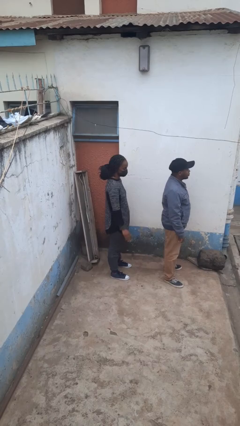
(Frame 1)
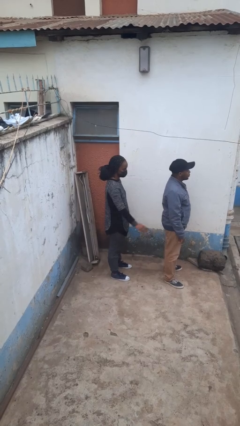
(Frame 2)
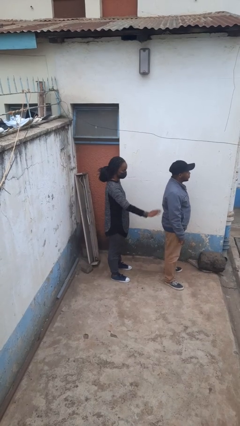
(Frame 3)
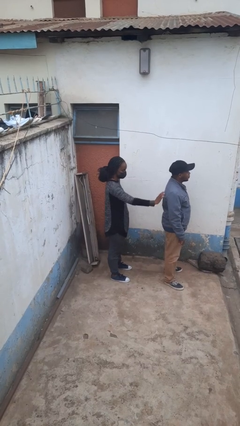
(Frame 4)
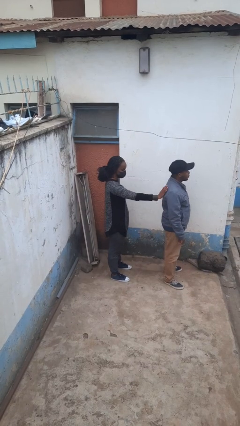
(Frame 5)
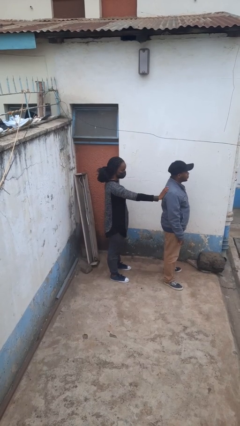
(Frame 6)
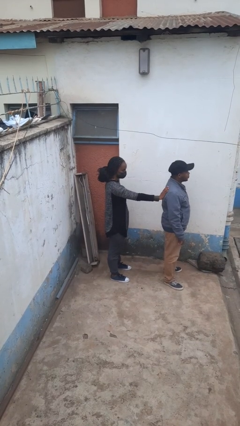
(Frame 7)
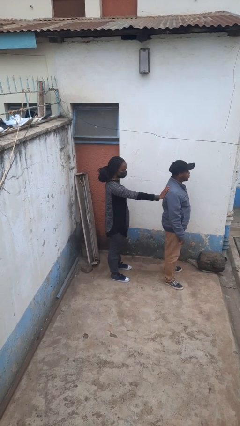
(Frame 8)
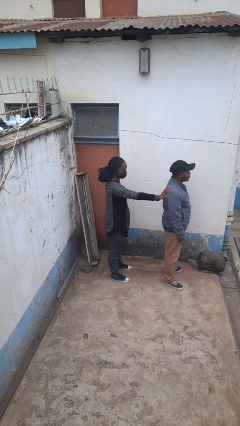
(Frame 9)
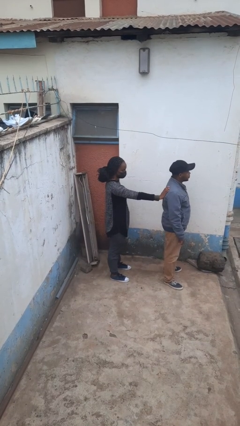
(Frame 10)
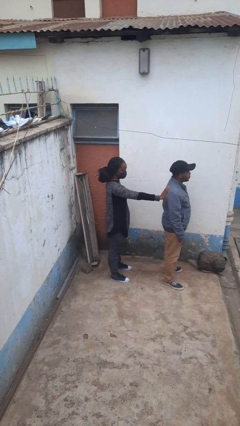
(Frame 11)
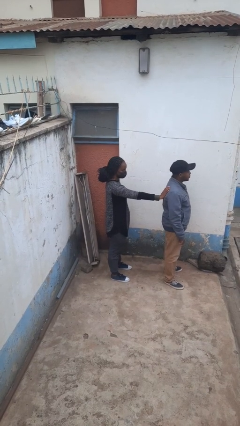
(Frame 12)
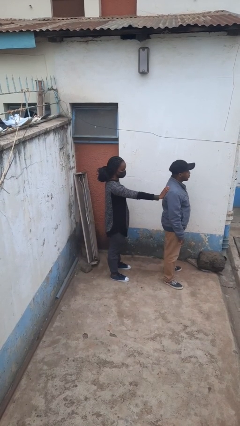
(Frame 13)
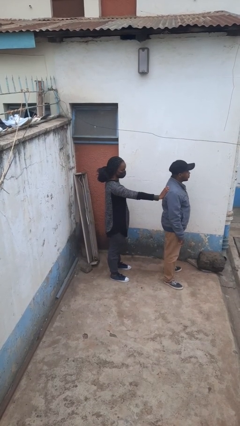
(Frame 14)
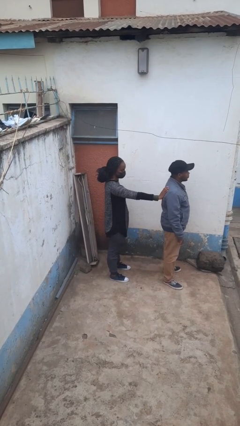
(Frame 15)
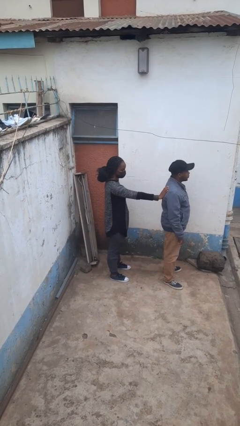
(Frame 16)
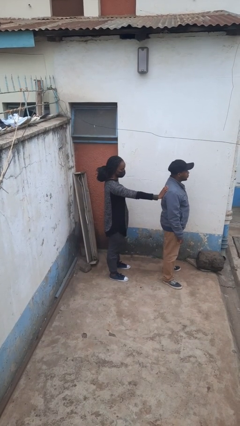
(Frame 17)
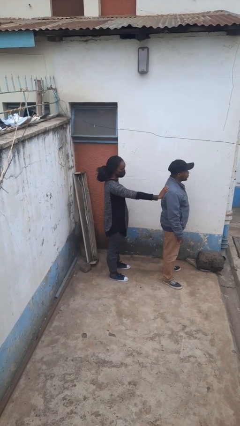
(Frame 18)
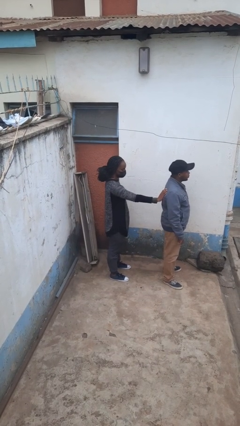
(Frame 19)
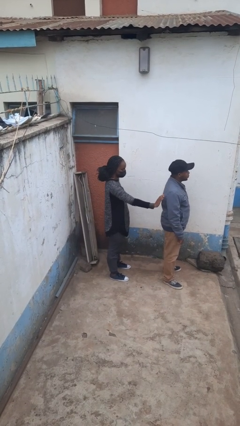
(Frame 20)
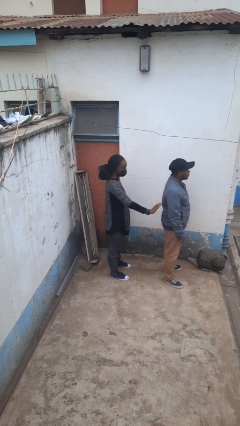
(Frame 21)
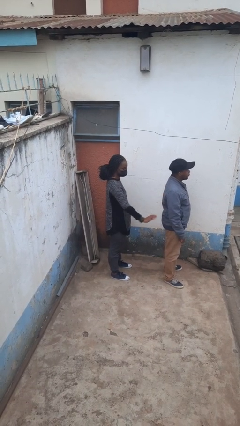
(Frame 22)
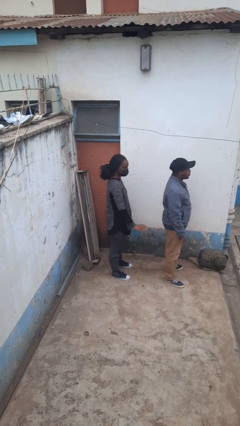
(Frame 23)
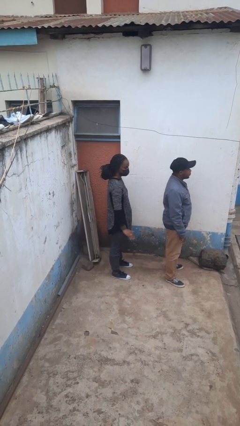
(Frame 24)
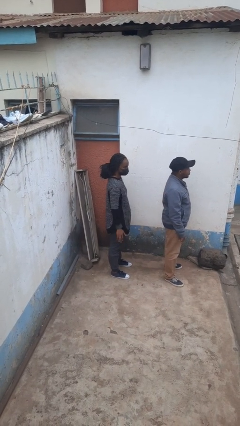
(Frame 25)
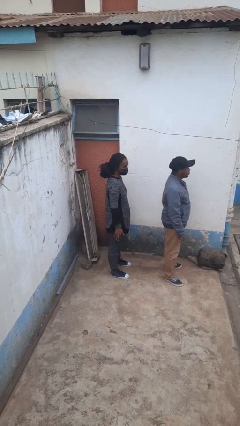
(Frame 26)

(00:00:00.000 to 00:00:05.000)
person touches back of person

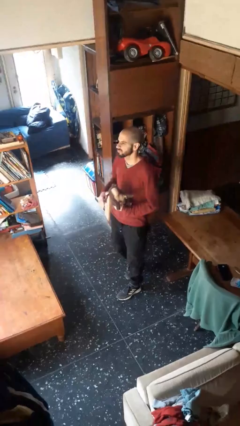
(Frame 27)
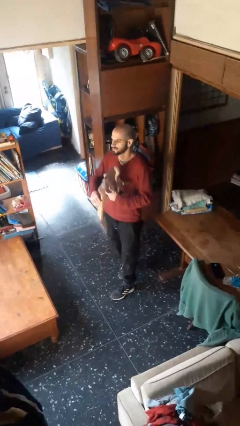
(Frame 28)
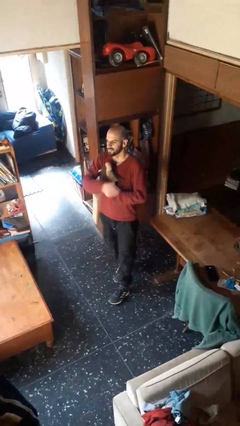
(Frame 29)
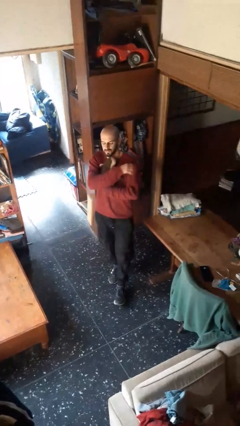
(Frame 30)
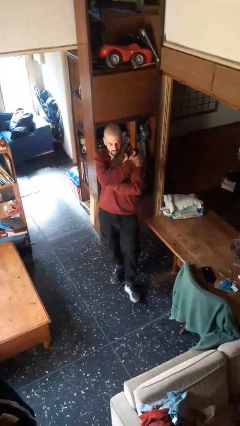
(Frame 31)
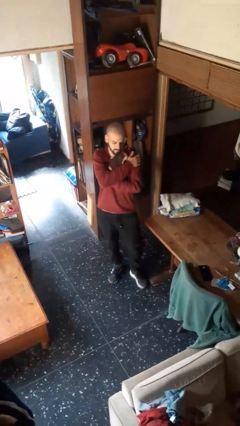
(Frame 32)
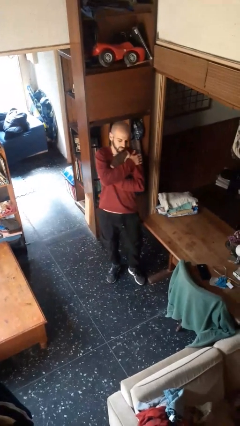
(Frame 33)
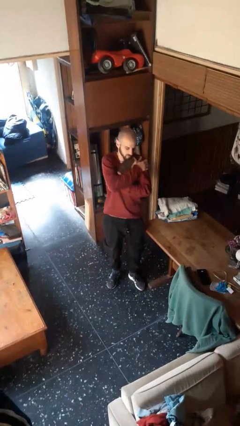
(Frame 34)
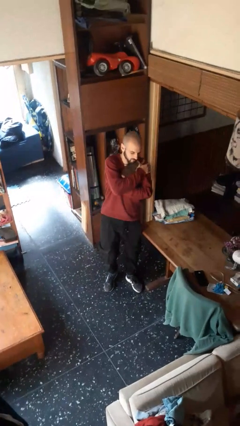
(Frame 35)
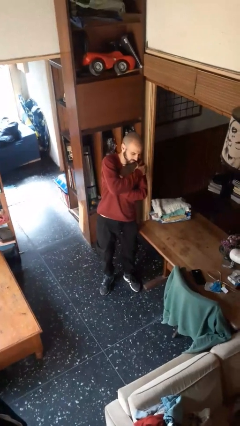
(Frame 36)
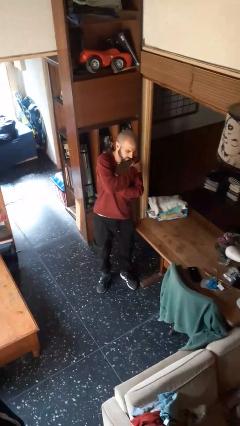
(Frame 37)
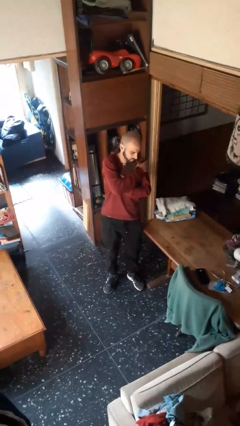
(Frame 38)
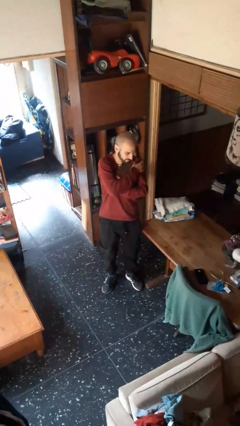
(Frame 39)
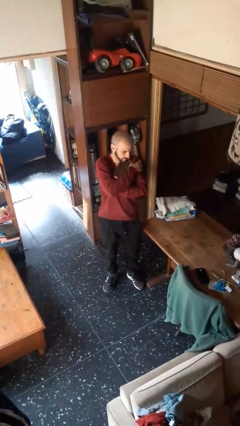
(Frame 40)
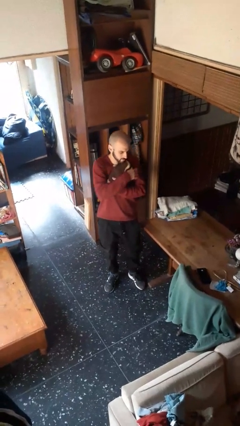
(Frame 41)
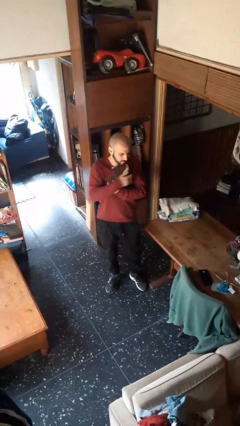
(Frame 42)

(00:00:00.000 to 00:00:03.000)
person hugs stuffed animal

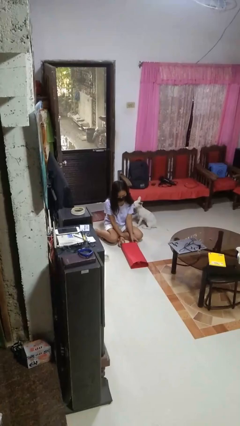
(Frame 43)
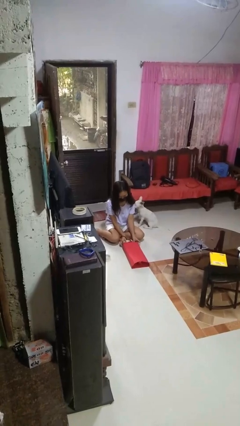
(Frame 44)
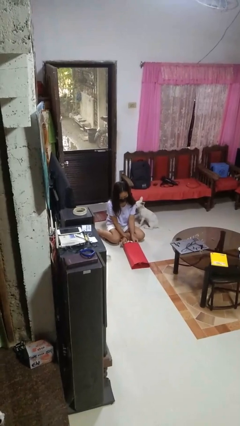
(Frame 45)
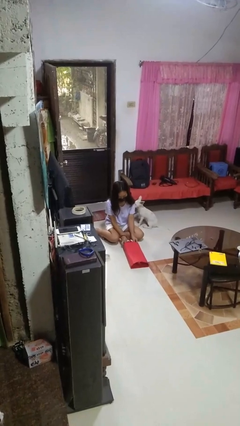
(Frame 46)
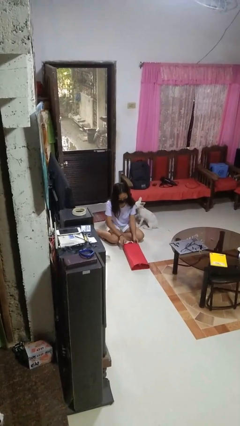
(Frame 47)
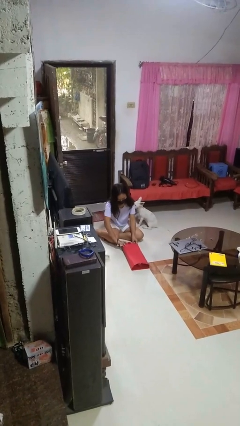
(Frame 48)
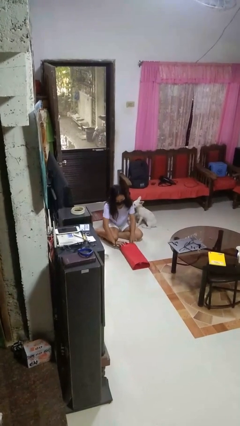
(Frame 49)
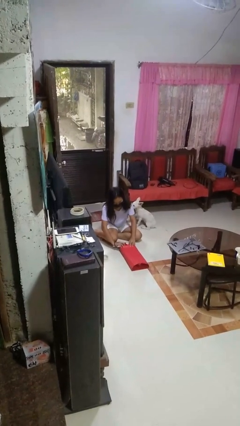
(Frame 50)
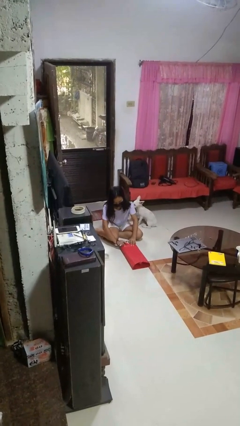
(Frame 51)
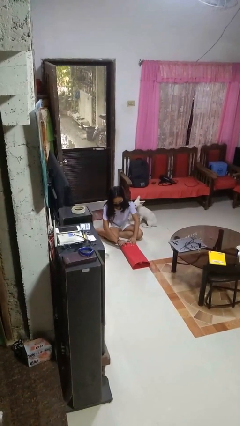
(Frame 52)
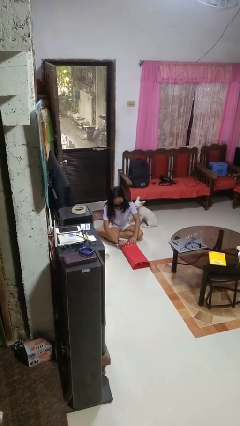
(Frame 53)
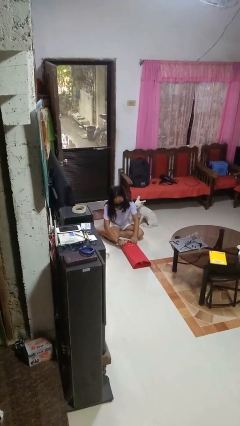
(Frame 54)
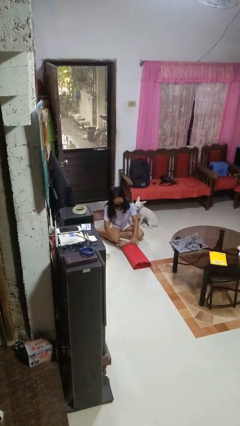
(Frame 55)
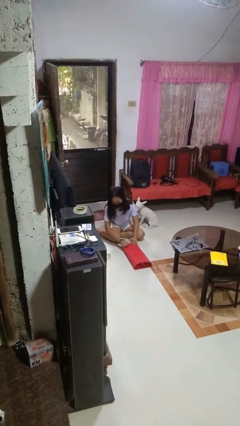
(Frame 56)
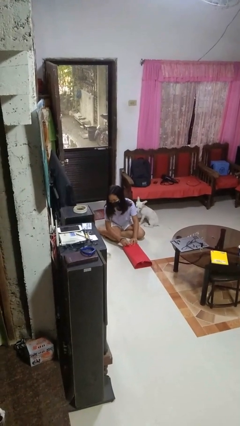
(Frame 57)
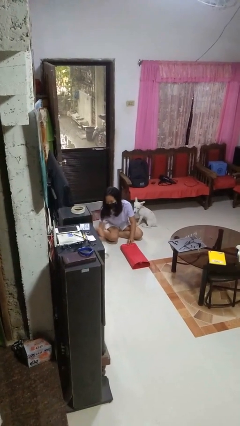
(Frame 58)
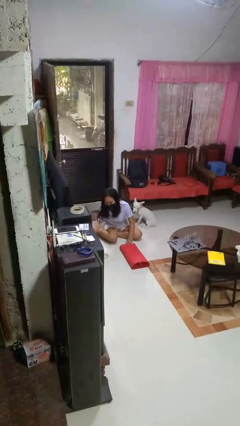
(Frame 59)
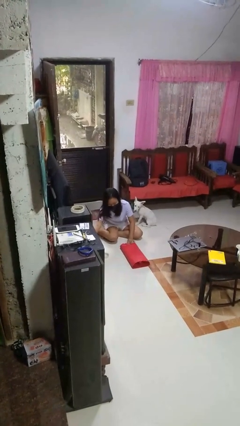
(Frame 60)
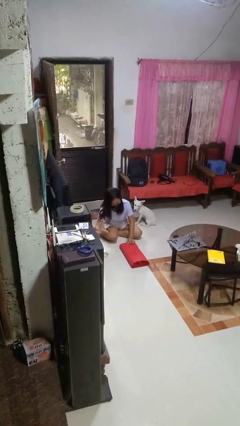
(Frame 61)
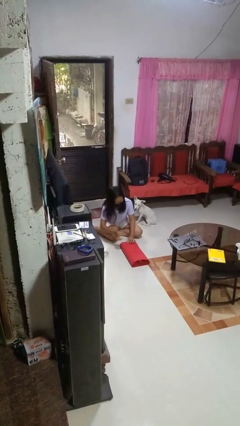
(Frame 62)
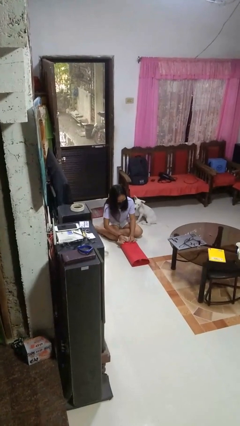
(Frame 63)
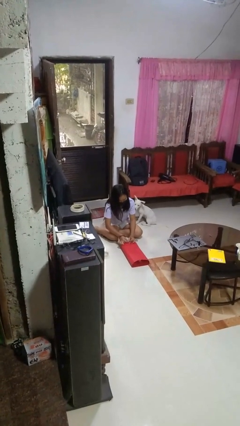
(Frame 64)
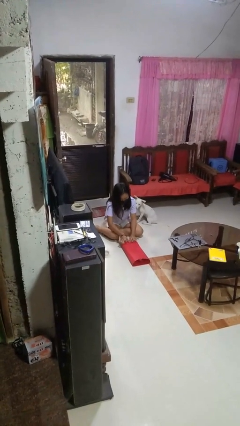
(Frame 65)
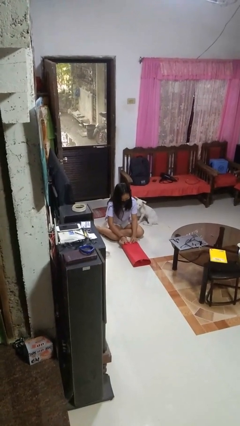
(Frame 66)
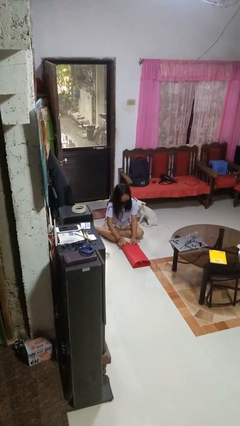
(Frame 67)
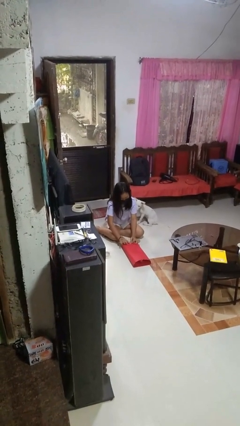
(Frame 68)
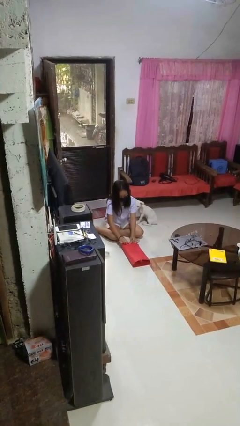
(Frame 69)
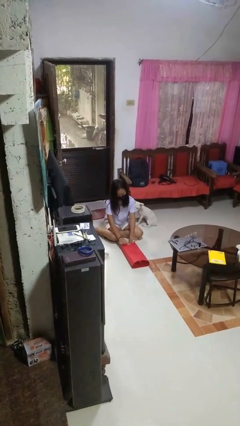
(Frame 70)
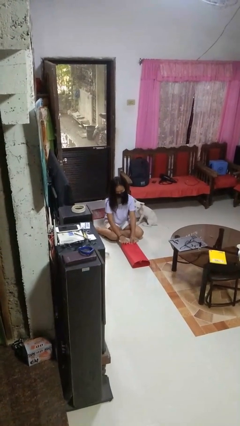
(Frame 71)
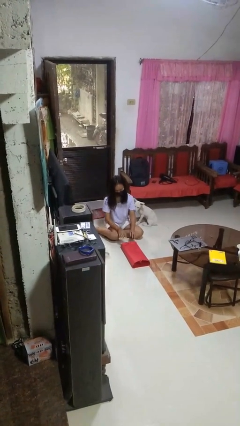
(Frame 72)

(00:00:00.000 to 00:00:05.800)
person wraps box

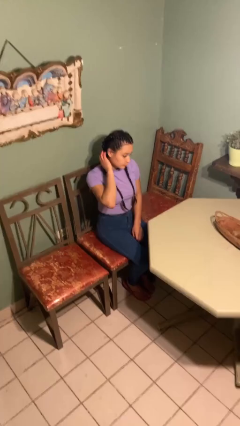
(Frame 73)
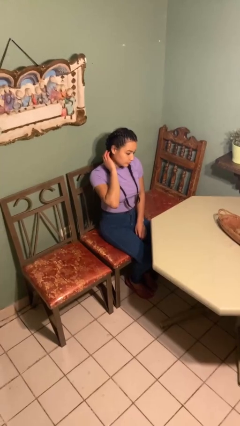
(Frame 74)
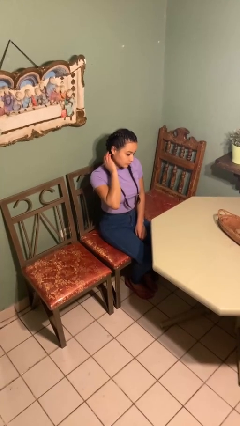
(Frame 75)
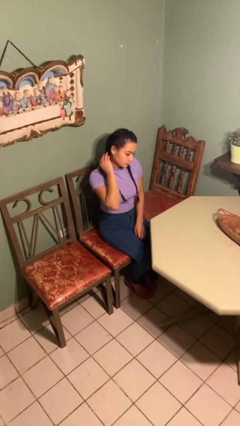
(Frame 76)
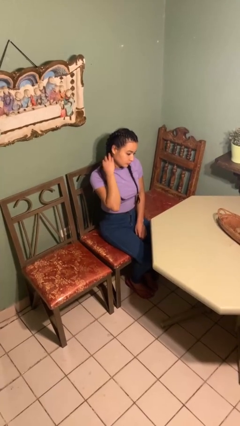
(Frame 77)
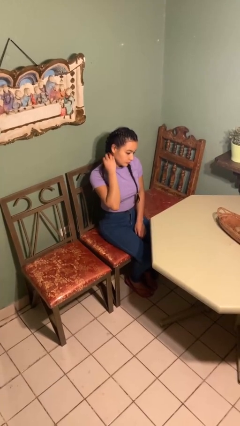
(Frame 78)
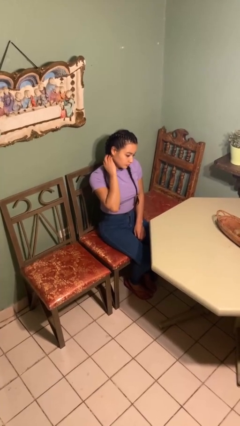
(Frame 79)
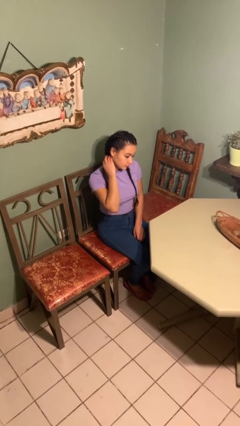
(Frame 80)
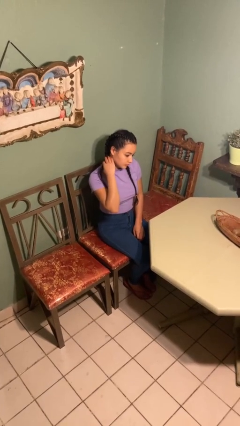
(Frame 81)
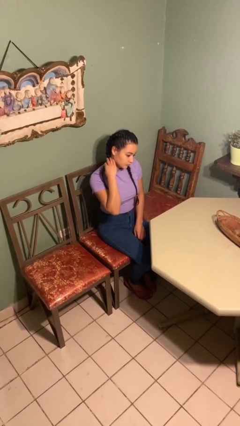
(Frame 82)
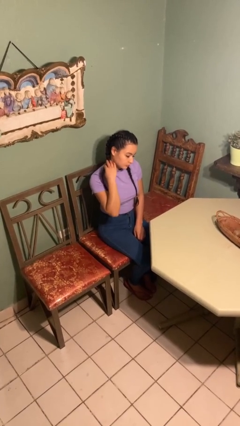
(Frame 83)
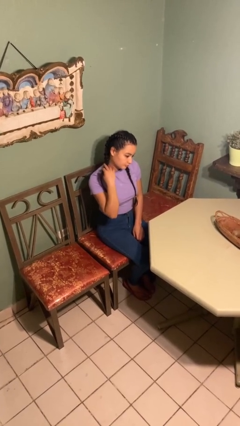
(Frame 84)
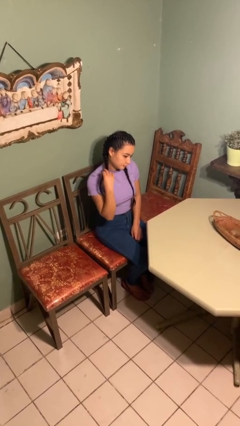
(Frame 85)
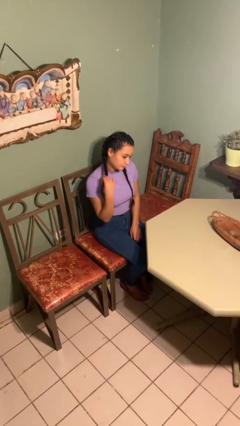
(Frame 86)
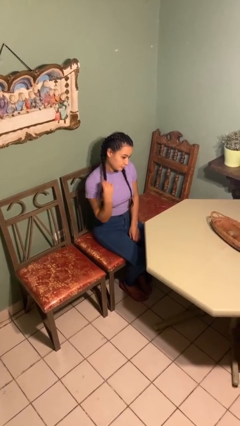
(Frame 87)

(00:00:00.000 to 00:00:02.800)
person strokes hair

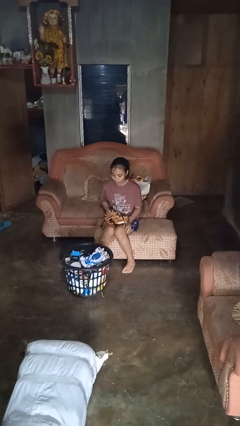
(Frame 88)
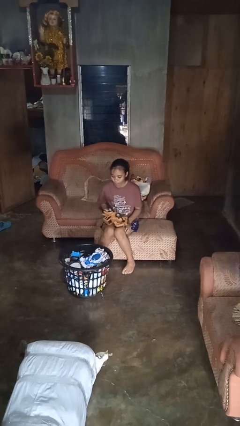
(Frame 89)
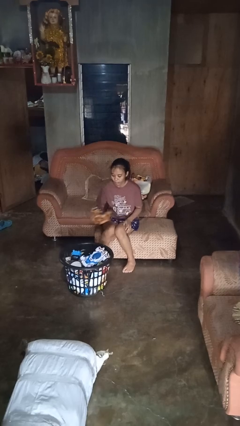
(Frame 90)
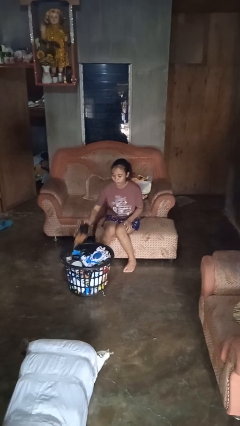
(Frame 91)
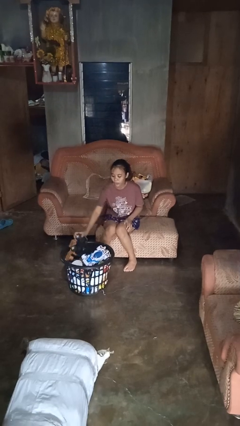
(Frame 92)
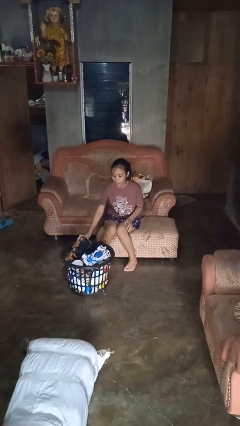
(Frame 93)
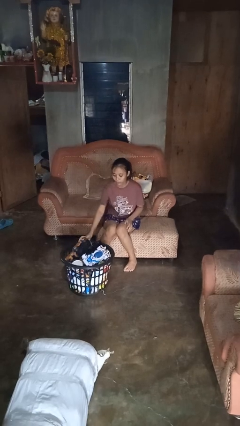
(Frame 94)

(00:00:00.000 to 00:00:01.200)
person puts object into basket
